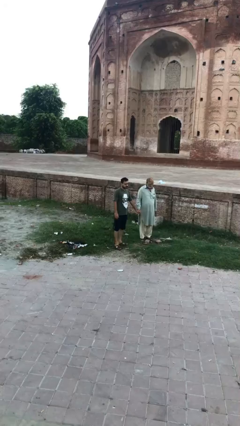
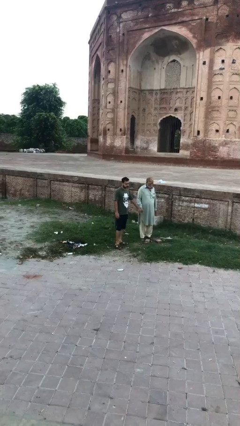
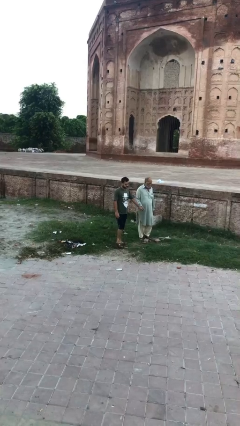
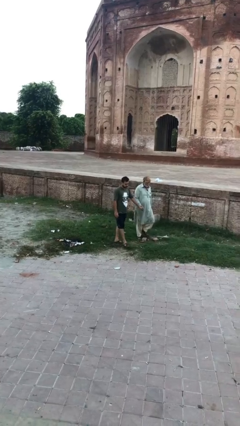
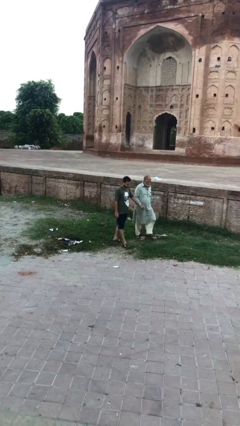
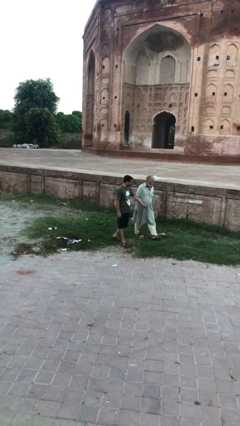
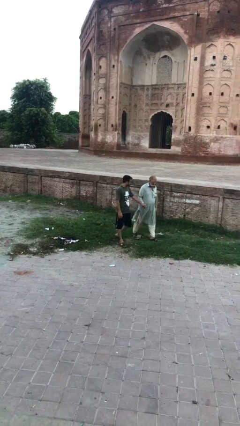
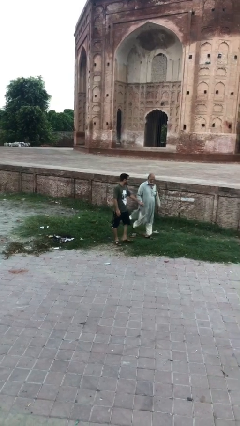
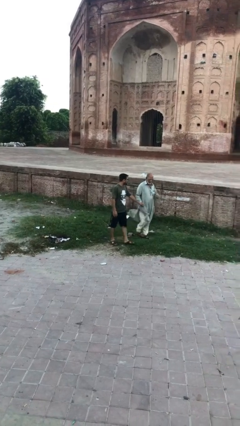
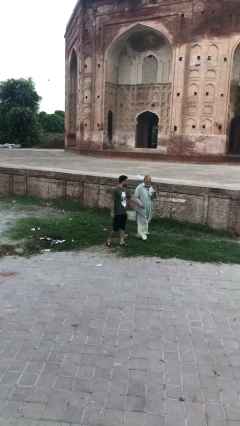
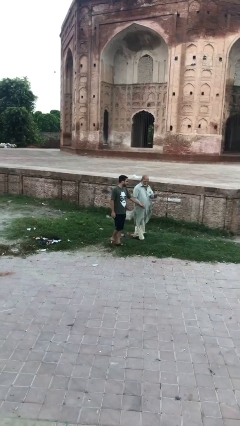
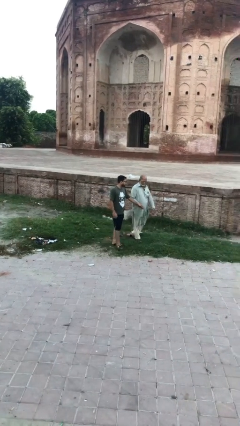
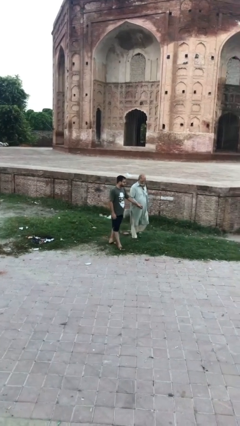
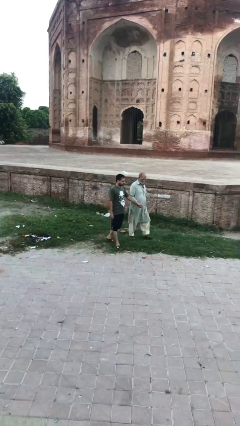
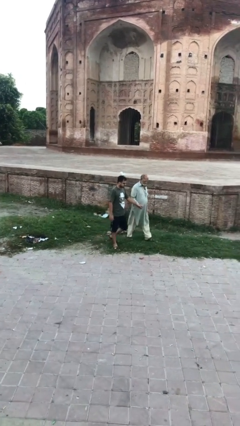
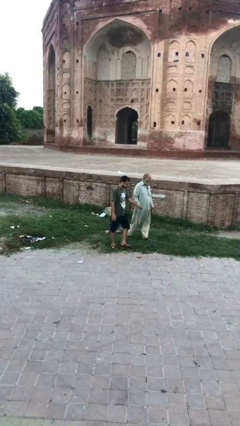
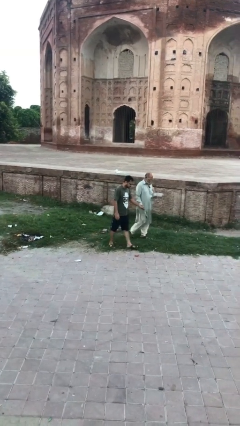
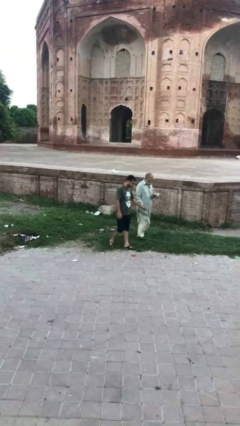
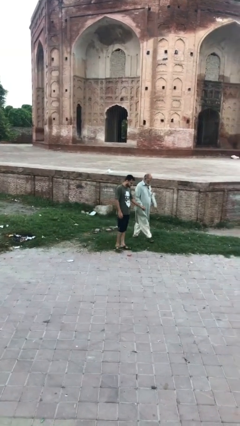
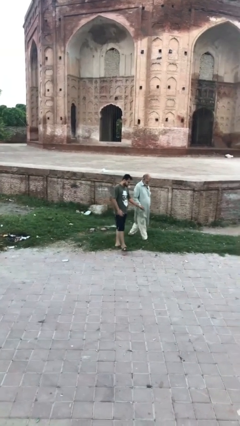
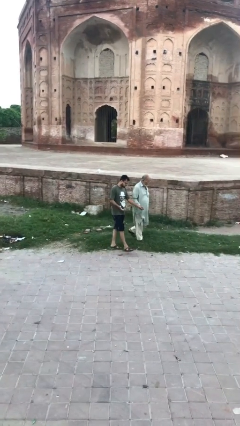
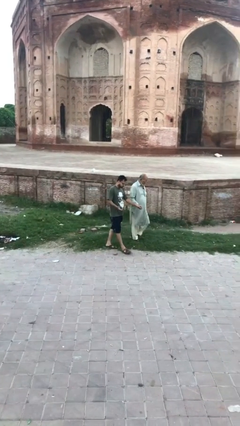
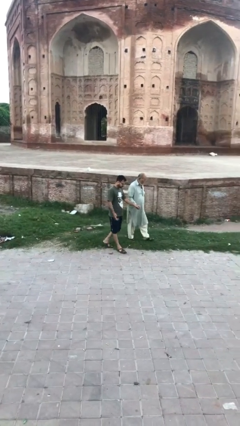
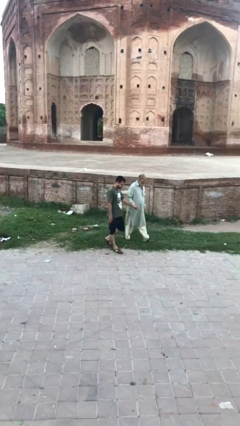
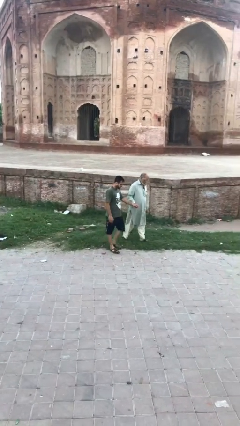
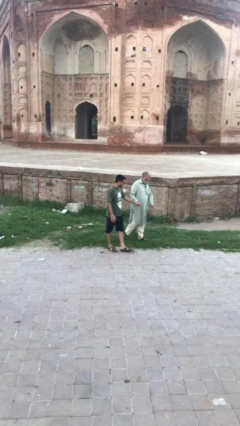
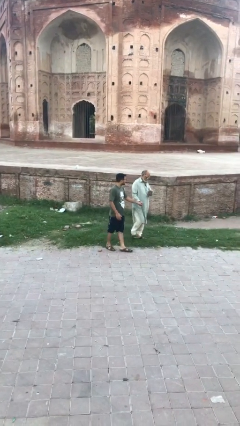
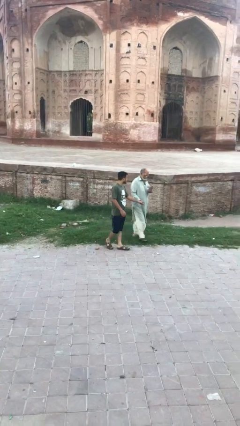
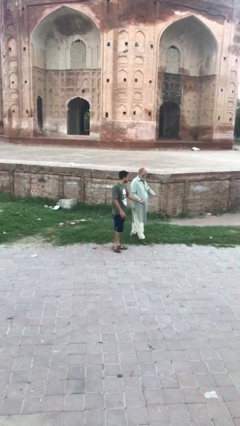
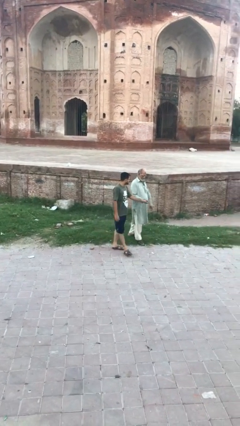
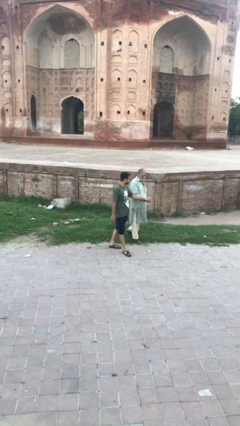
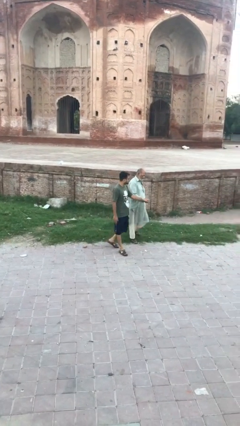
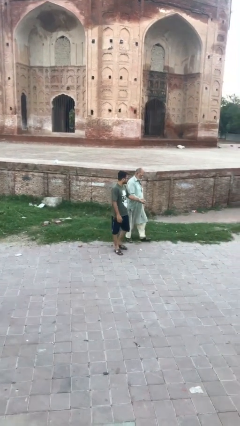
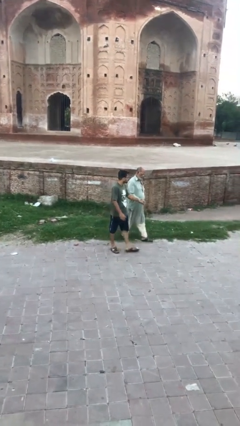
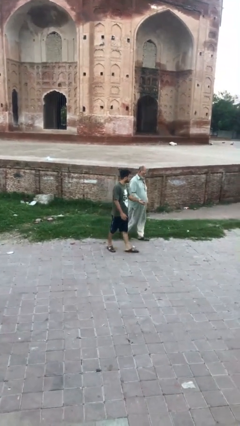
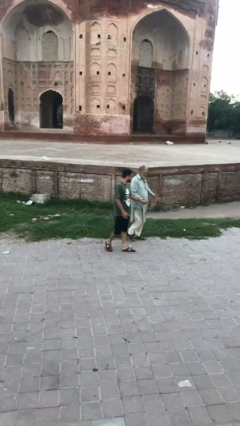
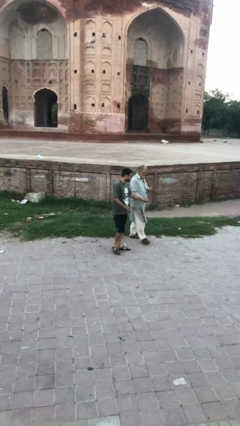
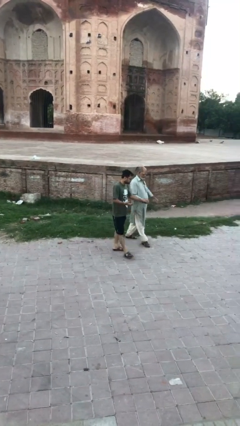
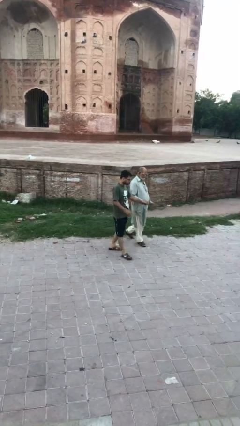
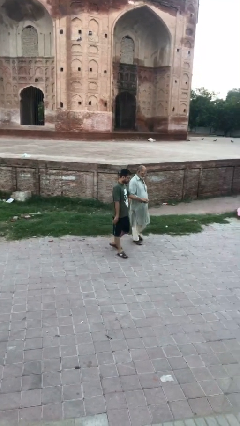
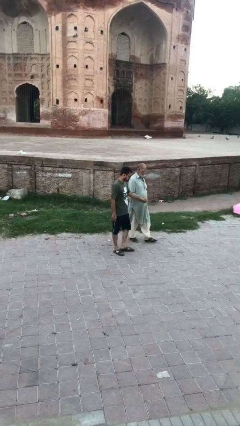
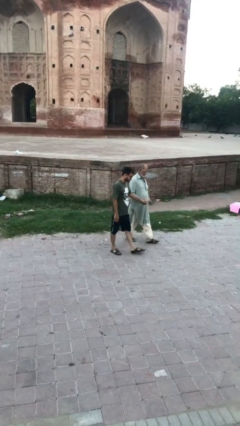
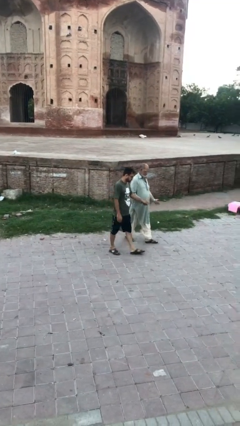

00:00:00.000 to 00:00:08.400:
person holds hand

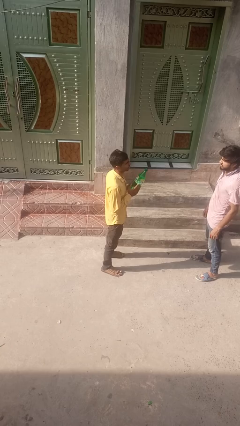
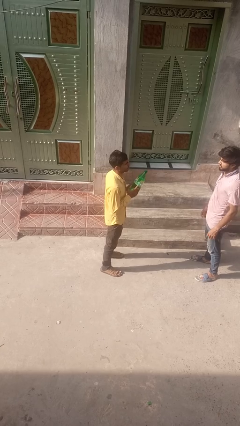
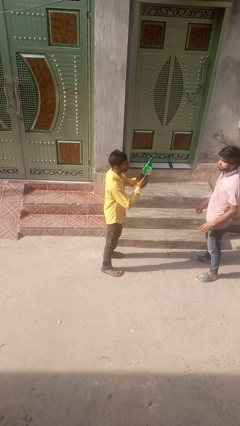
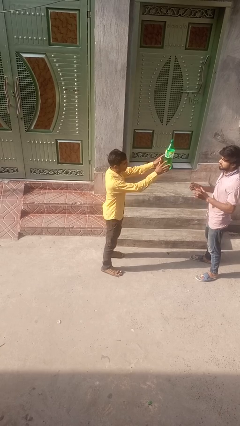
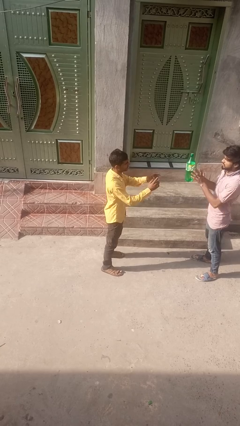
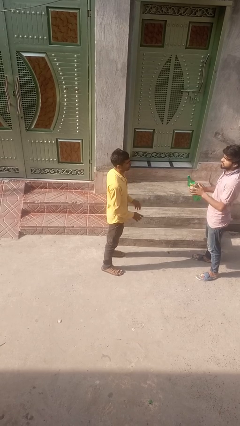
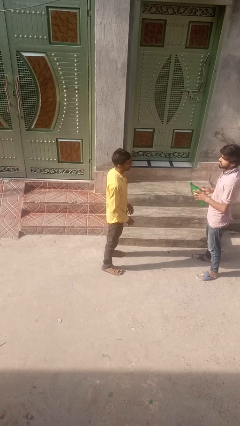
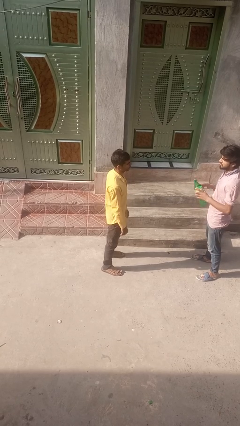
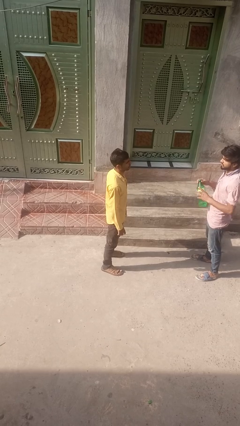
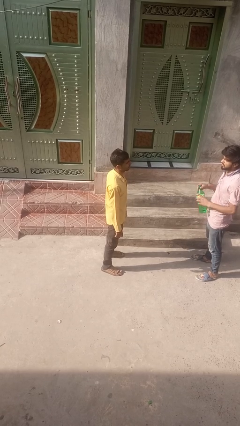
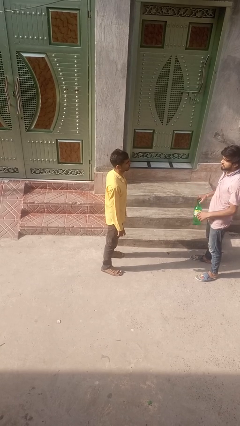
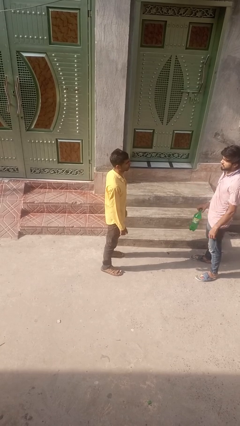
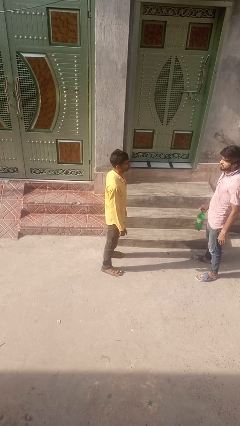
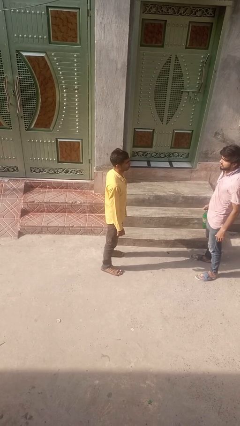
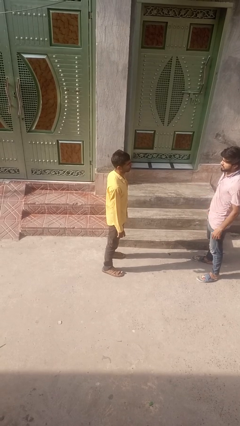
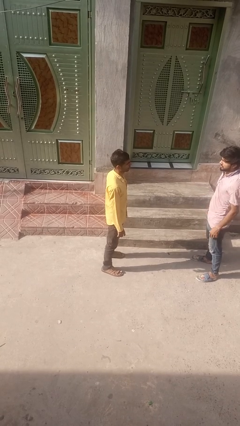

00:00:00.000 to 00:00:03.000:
person throws object to person

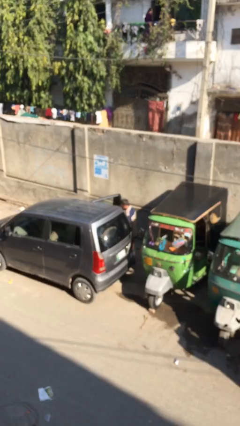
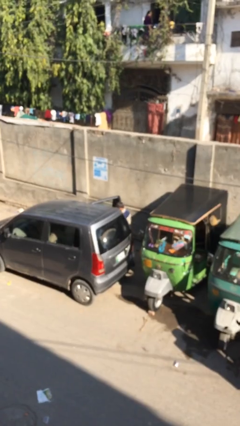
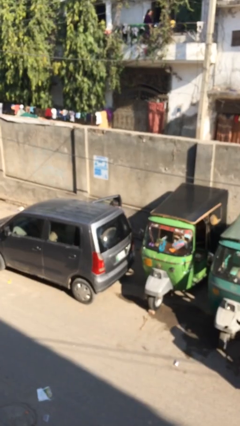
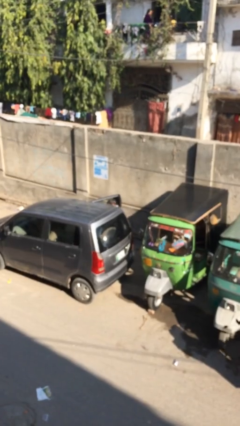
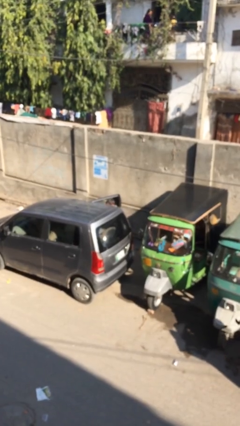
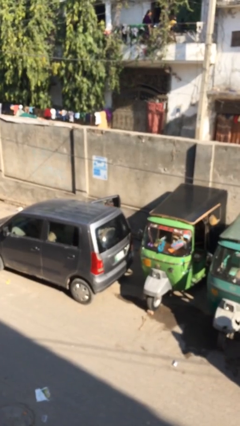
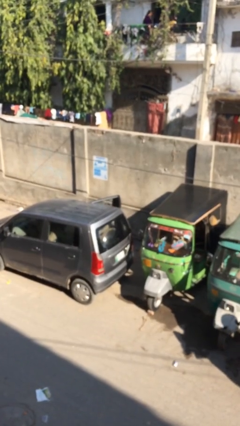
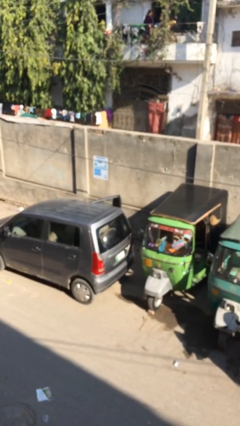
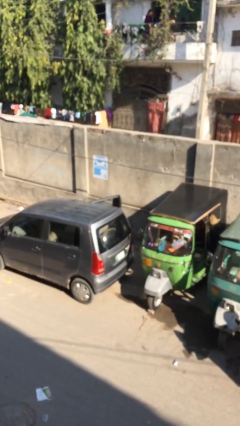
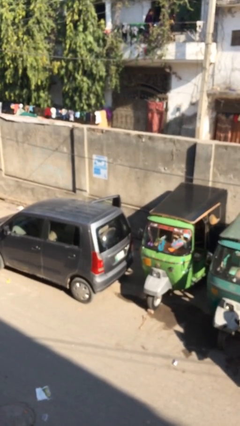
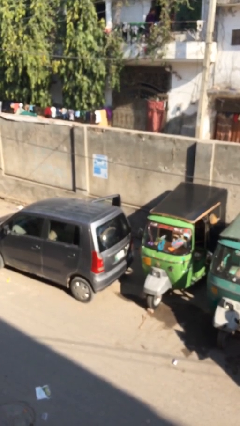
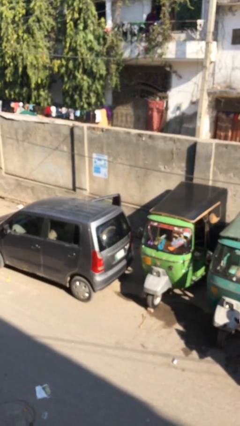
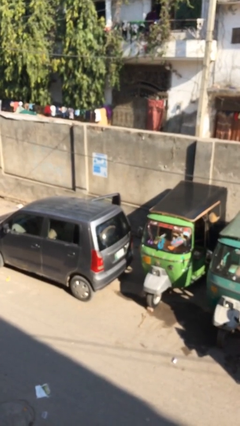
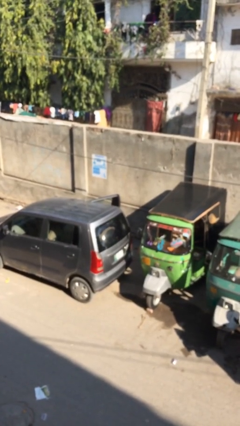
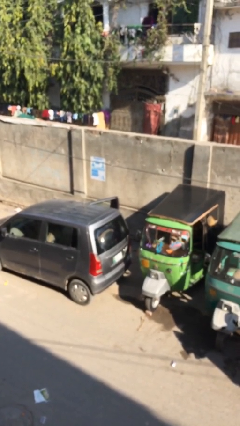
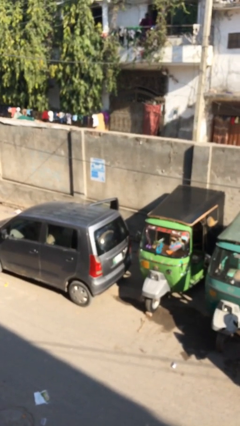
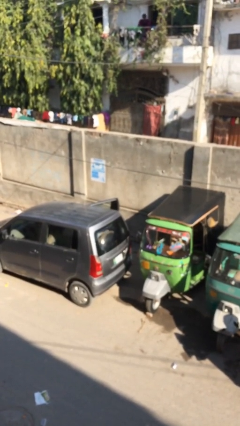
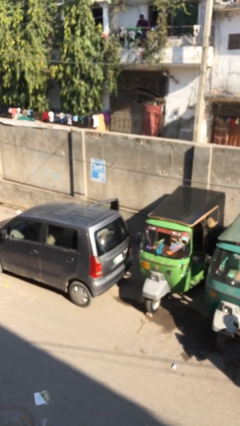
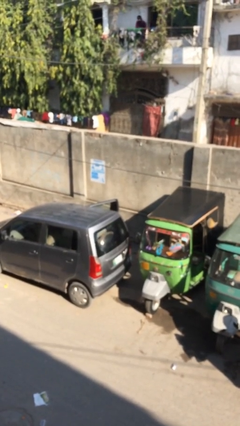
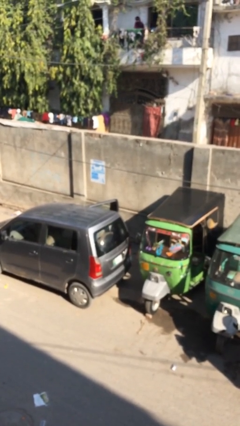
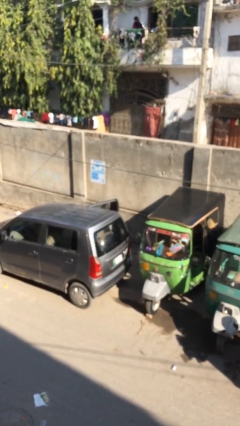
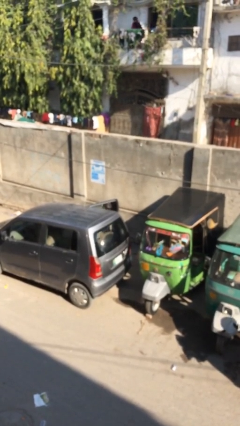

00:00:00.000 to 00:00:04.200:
person enters car

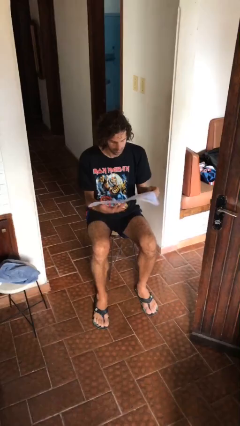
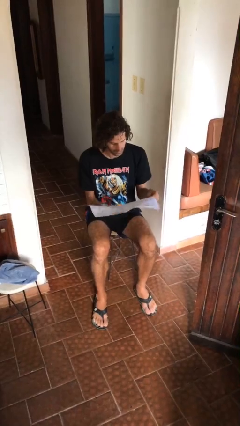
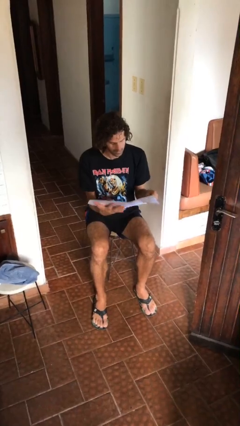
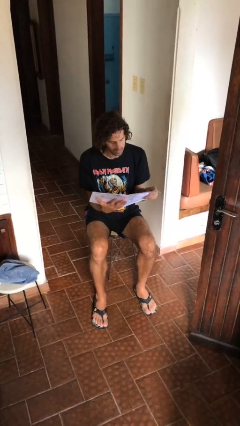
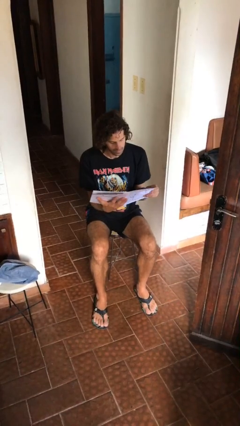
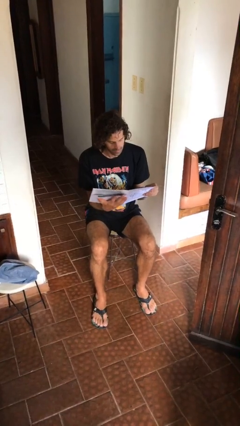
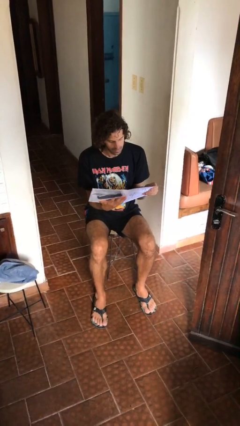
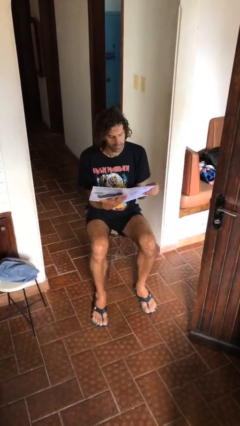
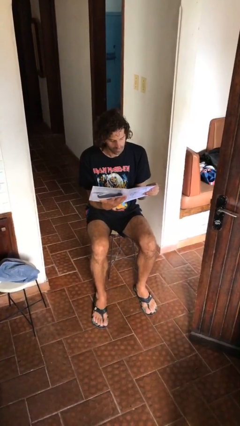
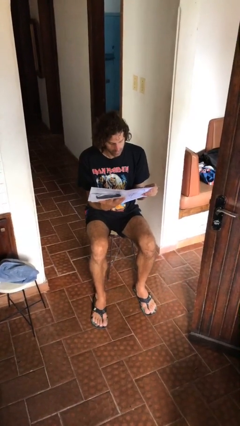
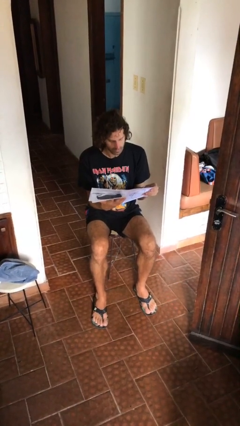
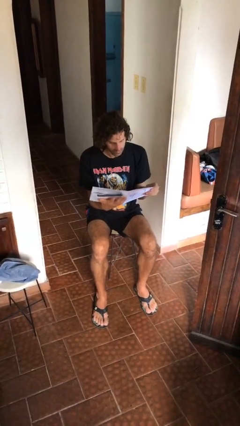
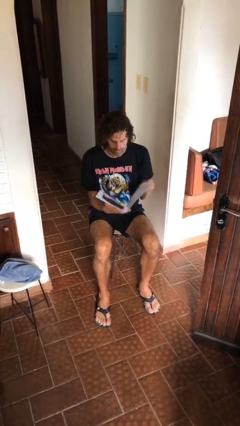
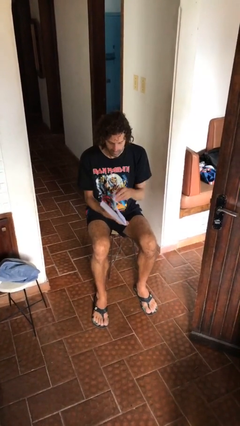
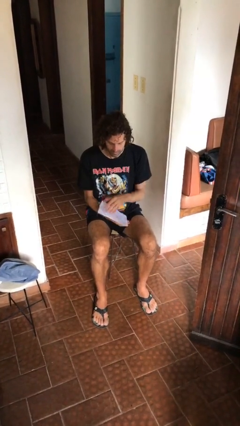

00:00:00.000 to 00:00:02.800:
person reads document
